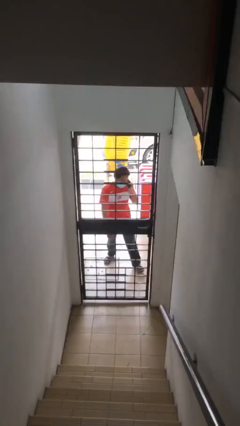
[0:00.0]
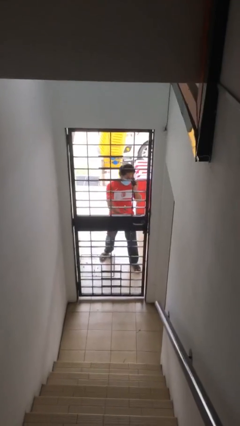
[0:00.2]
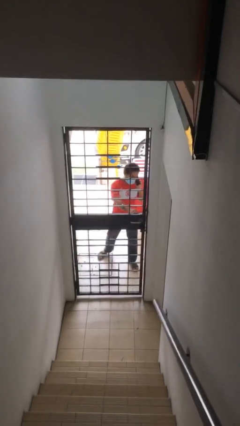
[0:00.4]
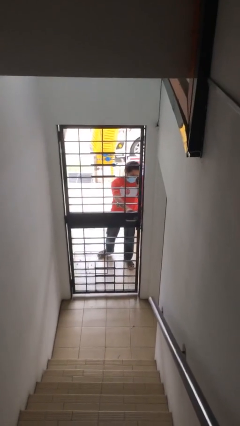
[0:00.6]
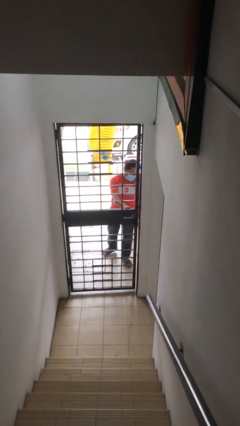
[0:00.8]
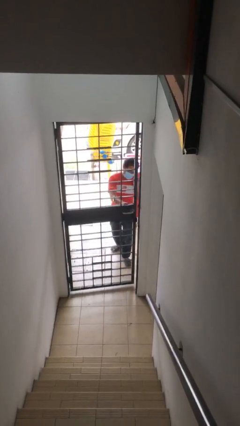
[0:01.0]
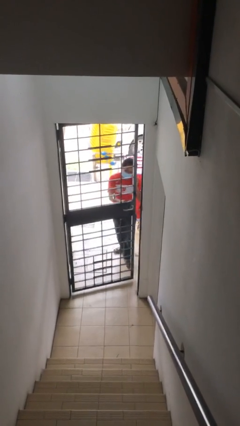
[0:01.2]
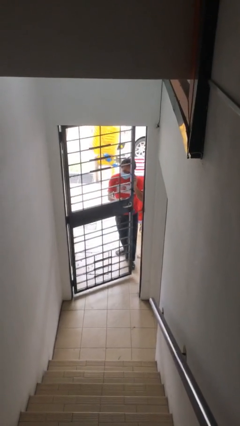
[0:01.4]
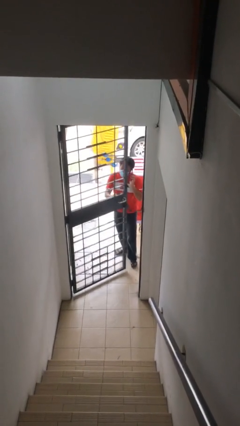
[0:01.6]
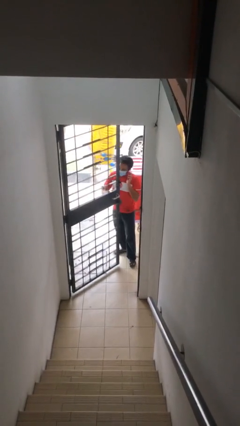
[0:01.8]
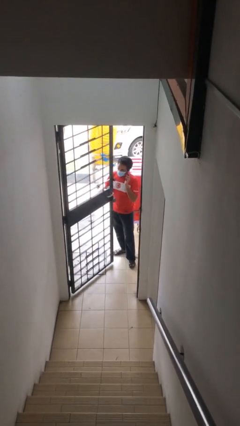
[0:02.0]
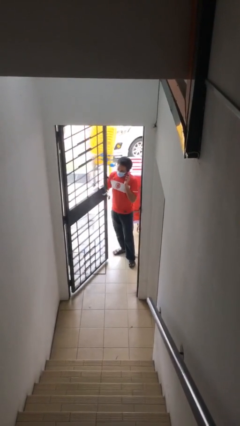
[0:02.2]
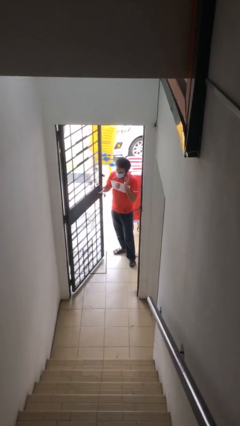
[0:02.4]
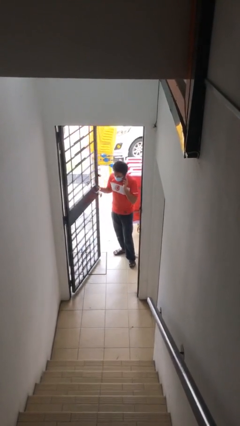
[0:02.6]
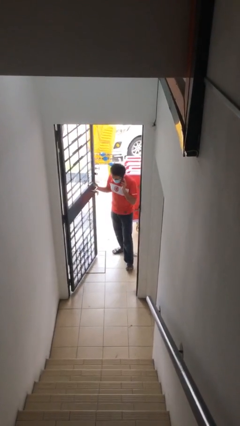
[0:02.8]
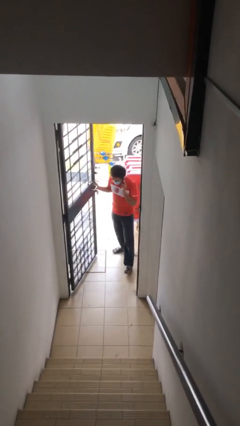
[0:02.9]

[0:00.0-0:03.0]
person opens facility door

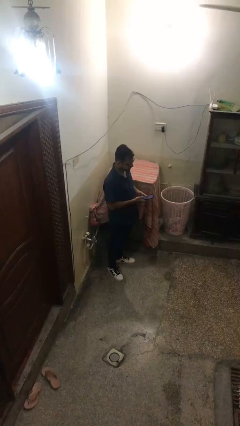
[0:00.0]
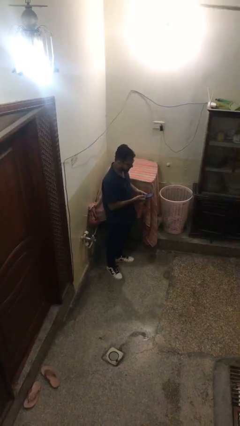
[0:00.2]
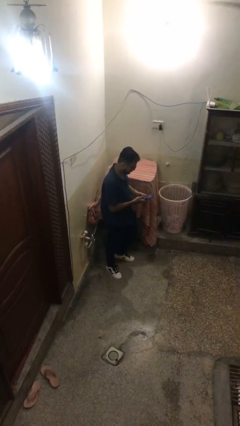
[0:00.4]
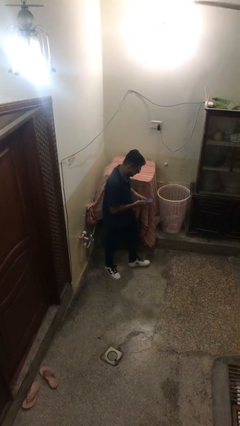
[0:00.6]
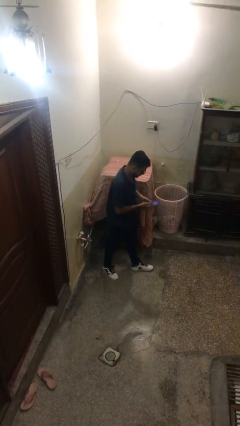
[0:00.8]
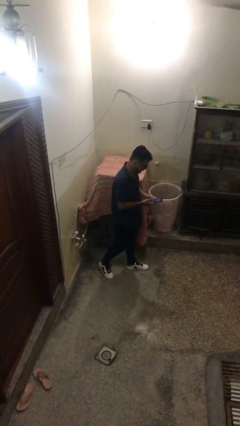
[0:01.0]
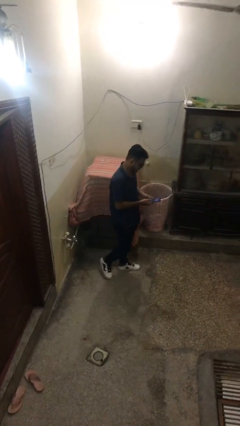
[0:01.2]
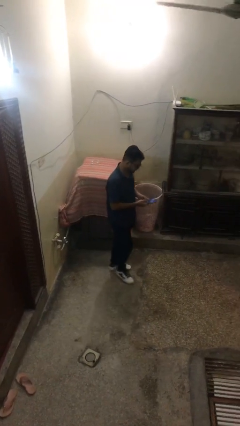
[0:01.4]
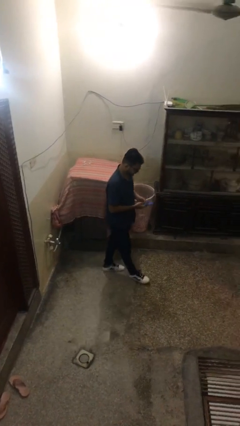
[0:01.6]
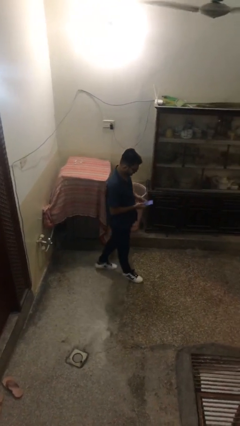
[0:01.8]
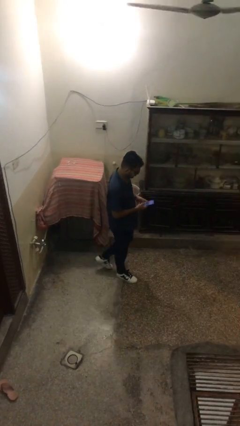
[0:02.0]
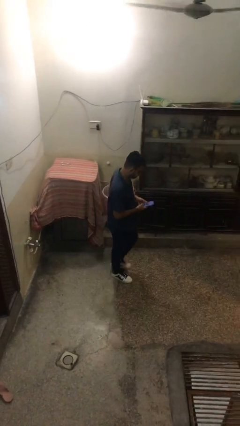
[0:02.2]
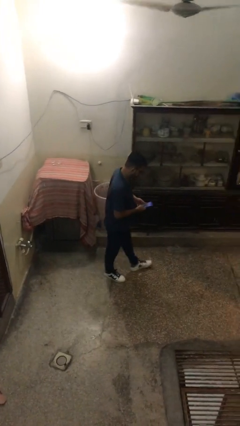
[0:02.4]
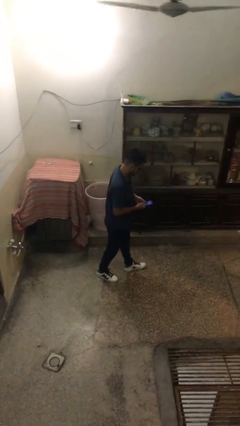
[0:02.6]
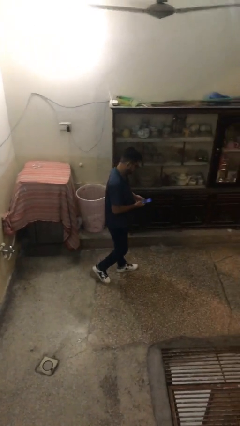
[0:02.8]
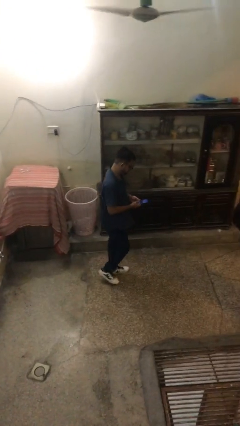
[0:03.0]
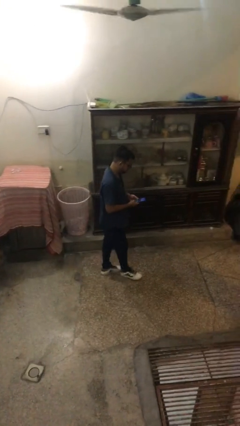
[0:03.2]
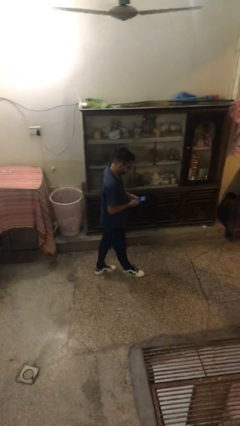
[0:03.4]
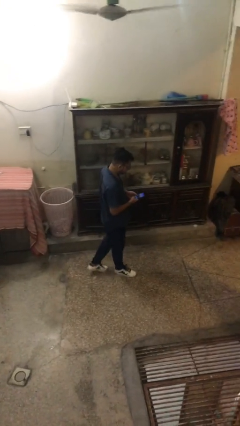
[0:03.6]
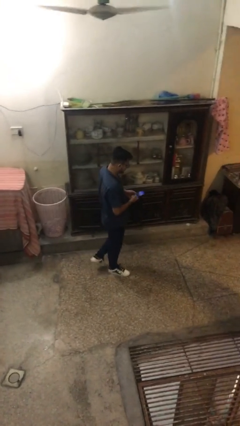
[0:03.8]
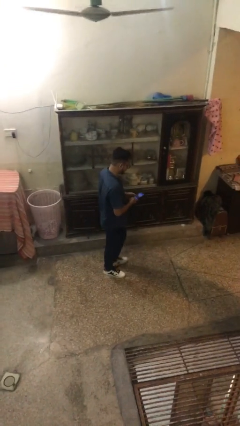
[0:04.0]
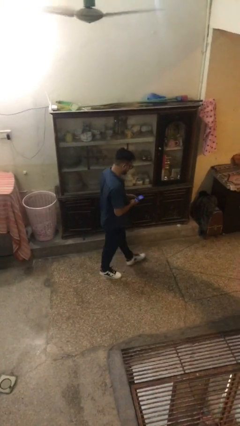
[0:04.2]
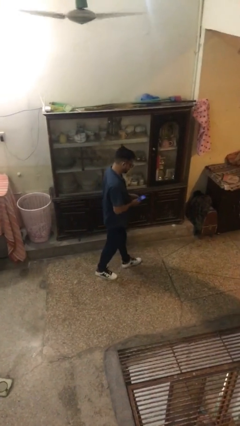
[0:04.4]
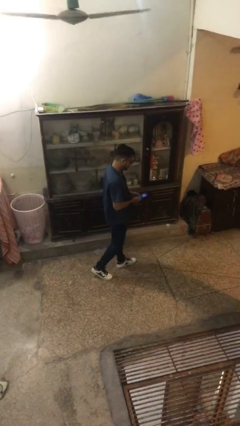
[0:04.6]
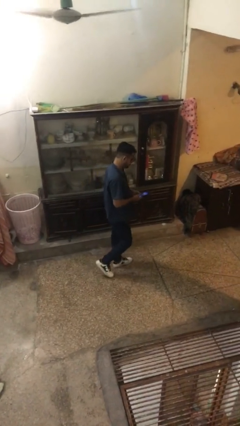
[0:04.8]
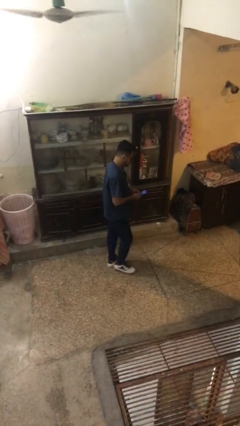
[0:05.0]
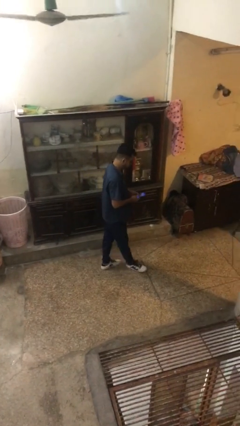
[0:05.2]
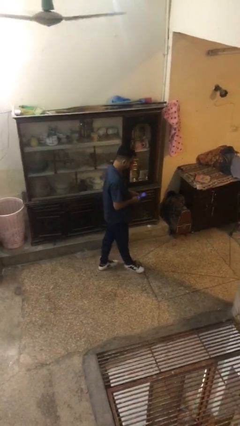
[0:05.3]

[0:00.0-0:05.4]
person texts on phone

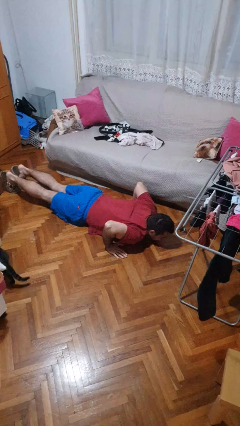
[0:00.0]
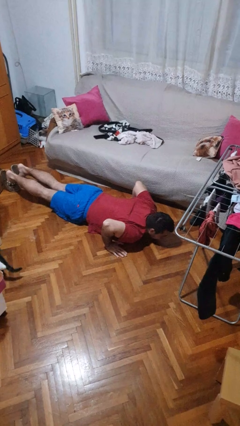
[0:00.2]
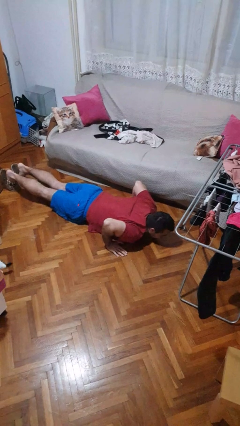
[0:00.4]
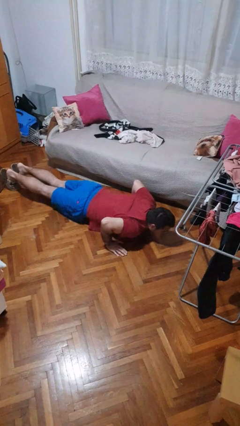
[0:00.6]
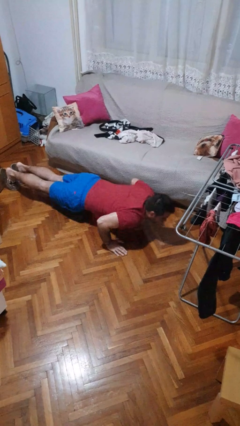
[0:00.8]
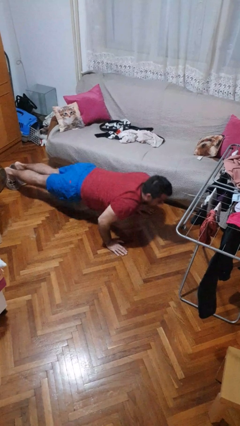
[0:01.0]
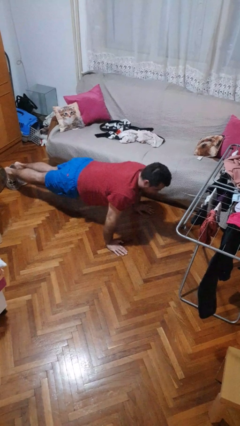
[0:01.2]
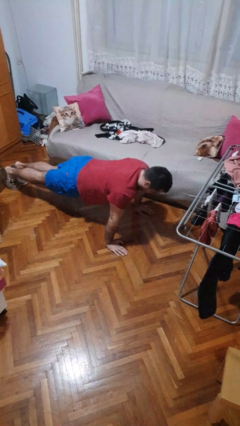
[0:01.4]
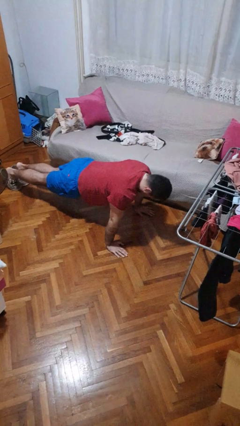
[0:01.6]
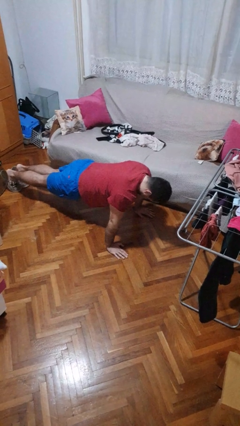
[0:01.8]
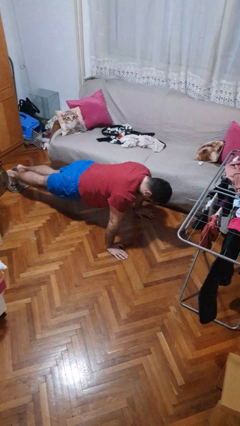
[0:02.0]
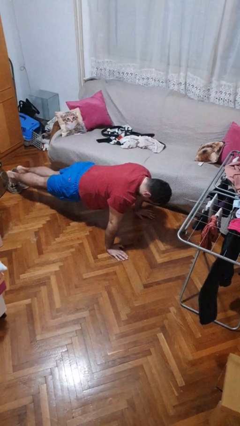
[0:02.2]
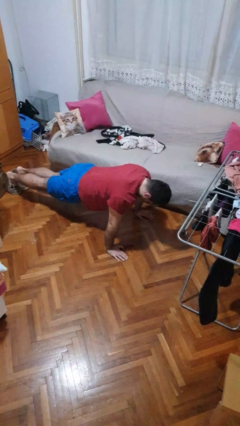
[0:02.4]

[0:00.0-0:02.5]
person exercises with pushup

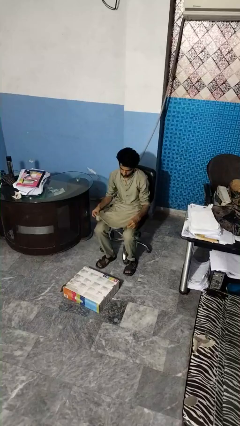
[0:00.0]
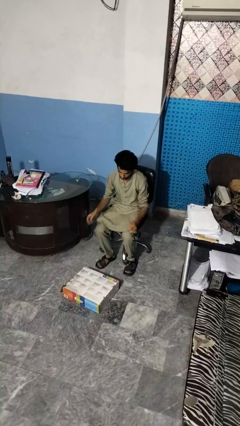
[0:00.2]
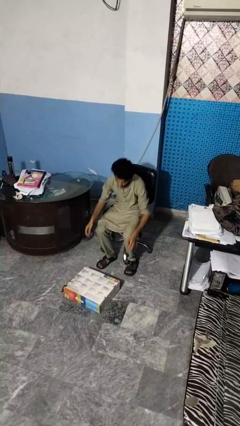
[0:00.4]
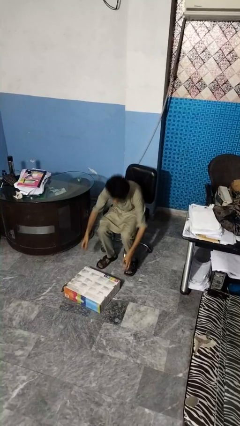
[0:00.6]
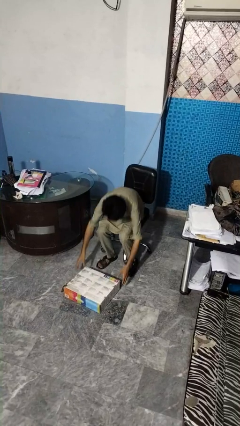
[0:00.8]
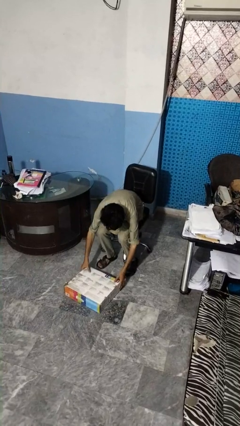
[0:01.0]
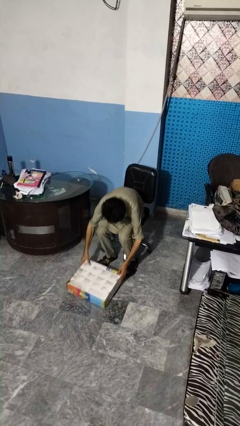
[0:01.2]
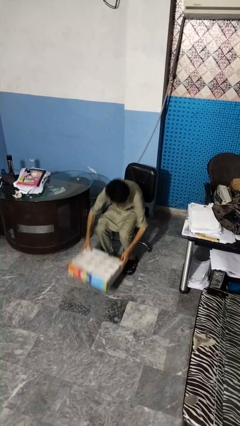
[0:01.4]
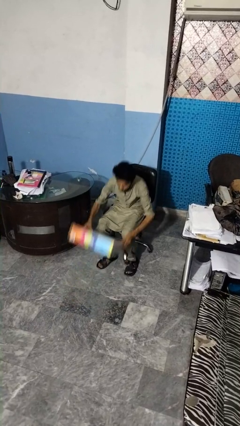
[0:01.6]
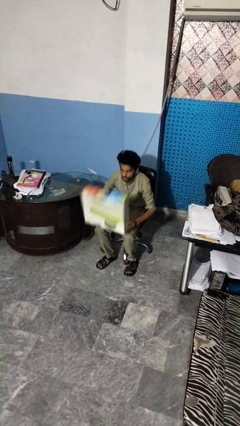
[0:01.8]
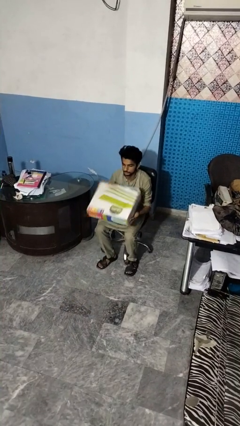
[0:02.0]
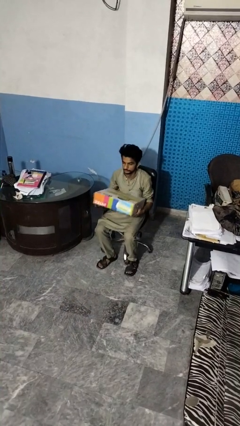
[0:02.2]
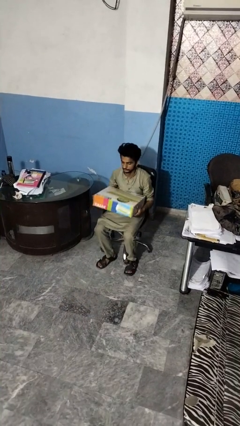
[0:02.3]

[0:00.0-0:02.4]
person picks up object from floor

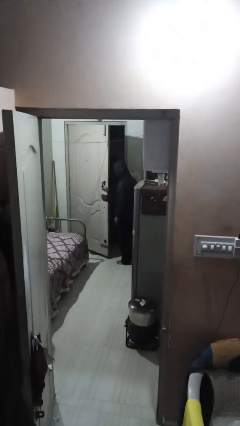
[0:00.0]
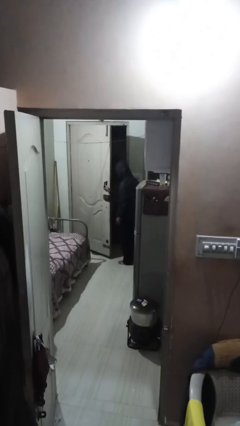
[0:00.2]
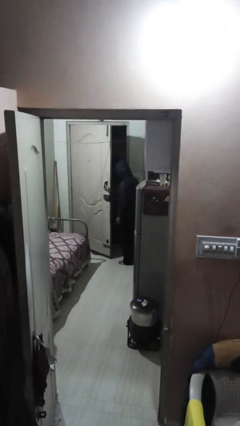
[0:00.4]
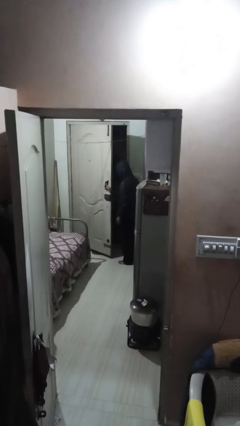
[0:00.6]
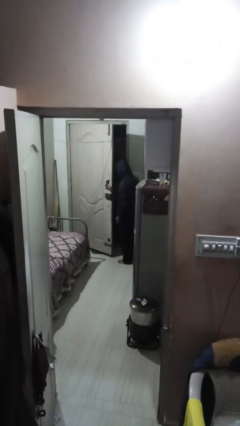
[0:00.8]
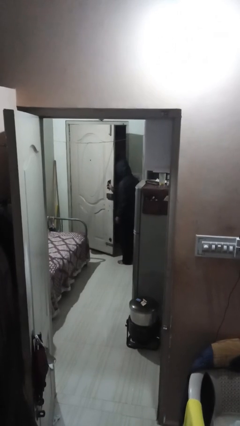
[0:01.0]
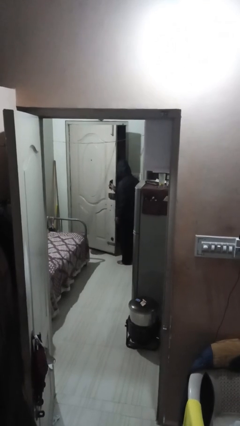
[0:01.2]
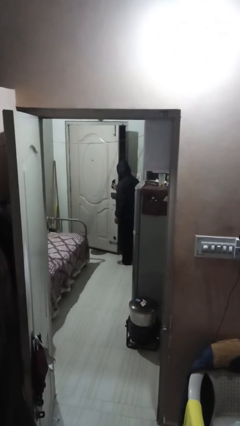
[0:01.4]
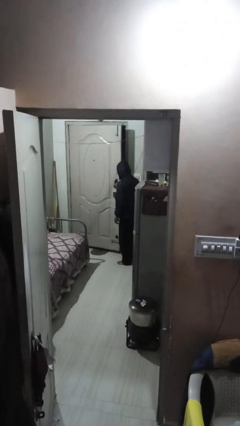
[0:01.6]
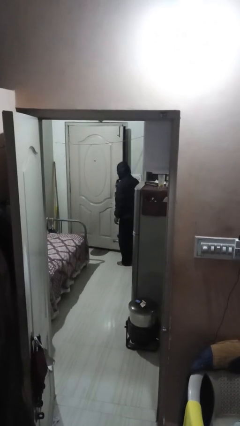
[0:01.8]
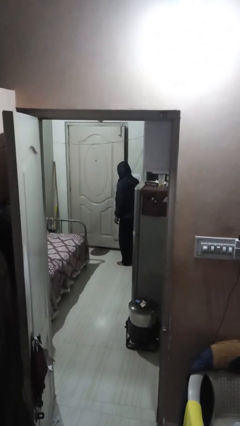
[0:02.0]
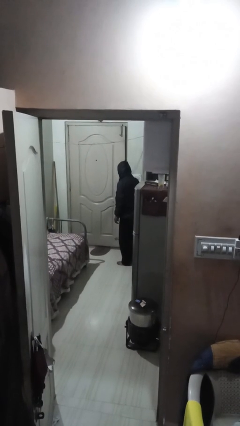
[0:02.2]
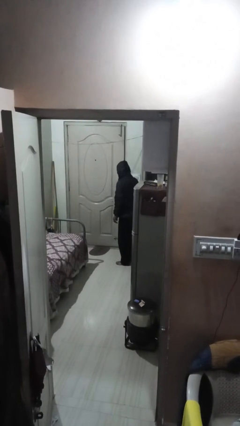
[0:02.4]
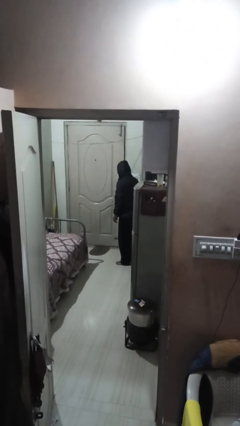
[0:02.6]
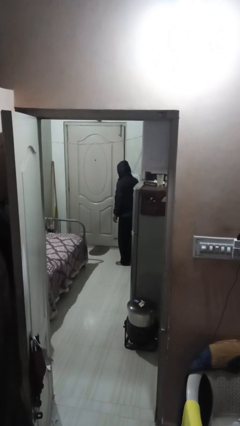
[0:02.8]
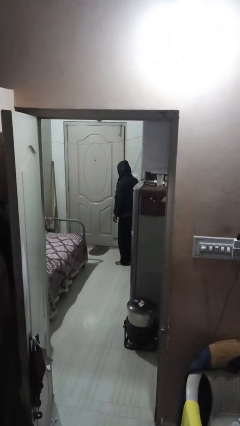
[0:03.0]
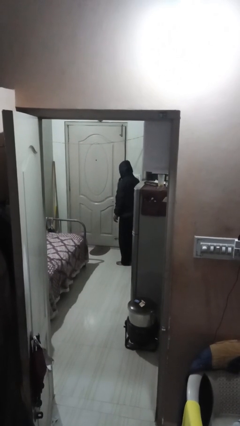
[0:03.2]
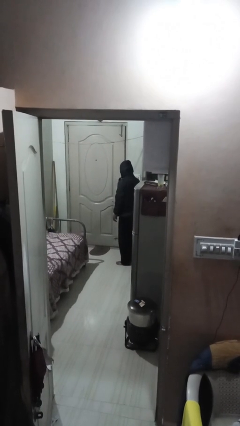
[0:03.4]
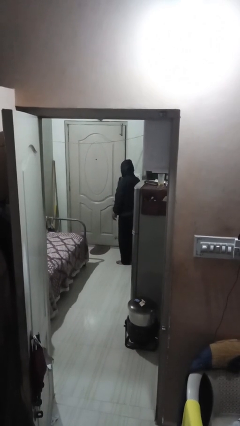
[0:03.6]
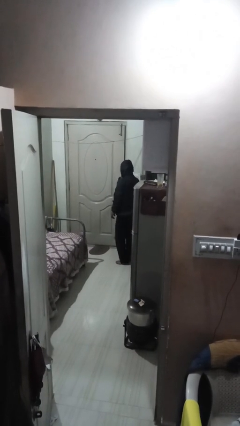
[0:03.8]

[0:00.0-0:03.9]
person closes facility door

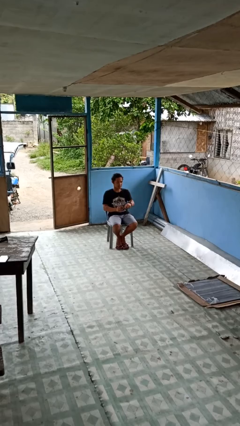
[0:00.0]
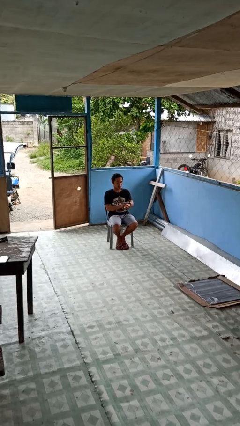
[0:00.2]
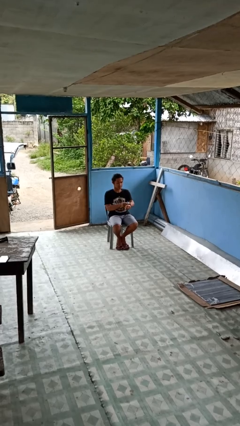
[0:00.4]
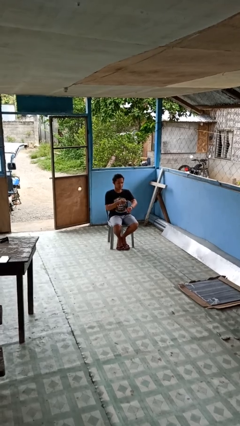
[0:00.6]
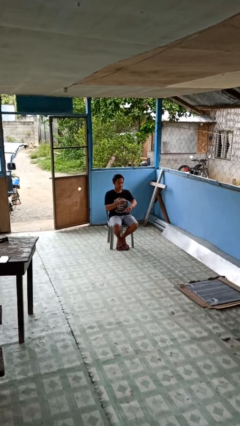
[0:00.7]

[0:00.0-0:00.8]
person takes off wristwatch
